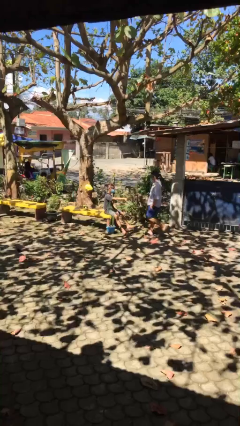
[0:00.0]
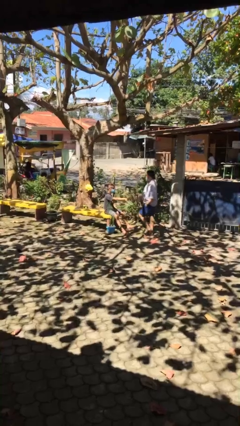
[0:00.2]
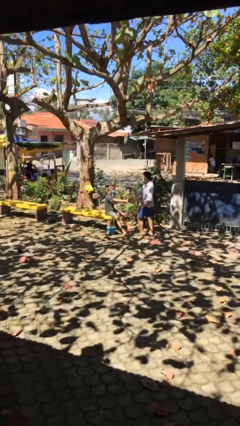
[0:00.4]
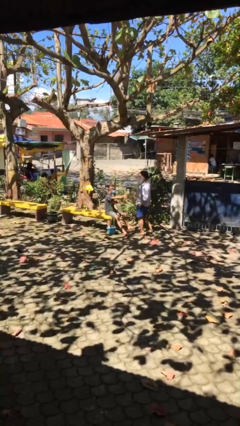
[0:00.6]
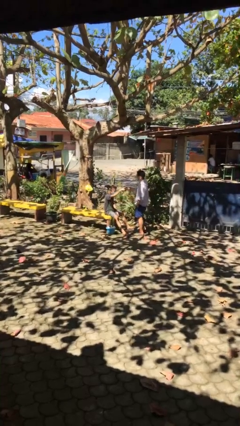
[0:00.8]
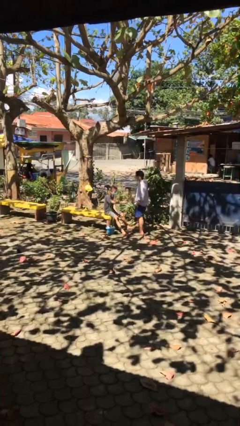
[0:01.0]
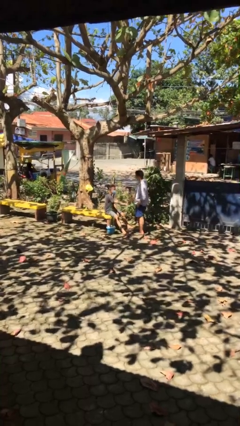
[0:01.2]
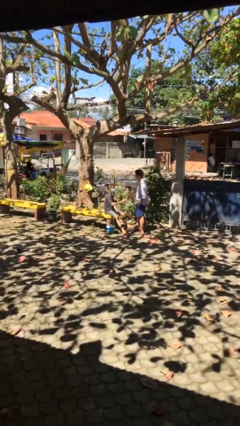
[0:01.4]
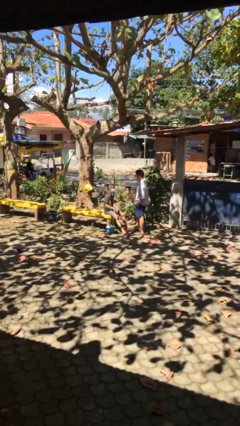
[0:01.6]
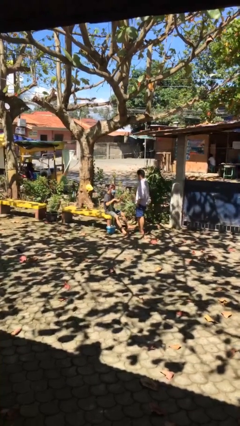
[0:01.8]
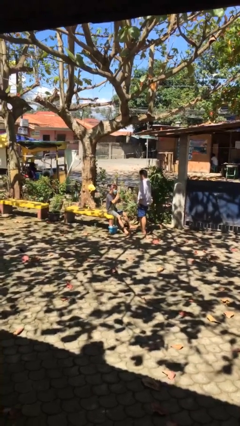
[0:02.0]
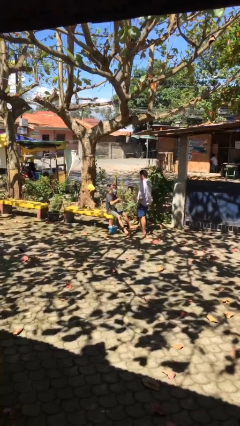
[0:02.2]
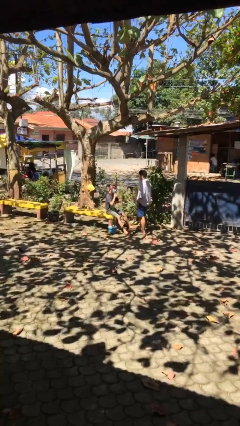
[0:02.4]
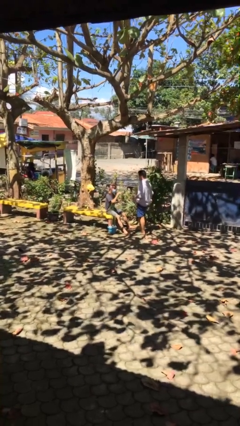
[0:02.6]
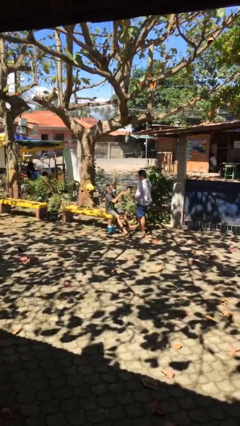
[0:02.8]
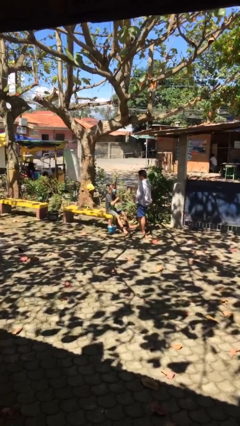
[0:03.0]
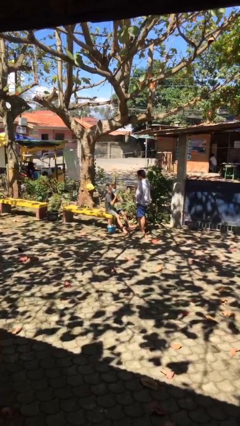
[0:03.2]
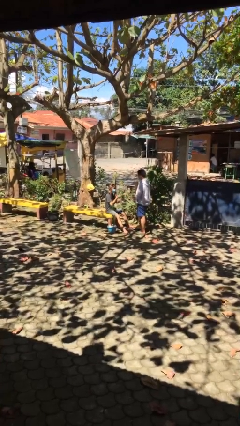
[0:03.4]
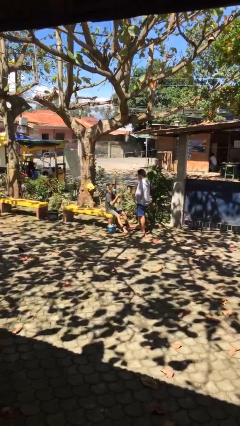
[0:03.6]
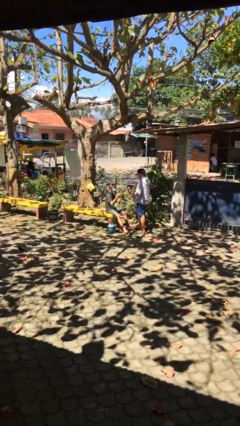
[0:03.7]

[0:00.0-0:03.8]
person shakes hand

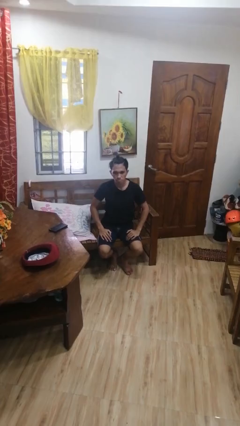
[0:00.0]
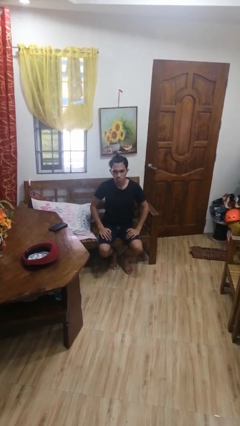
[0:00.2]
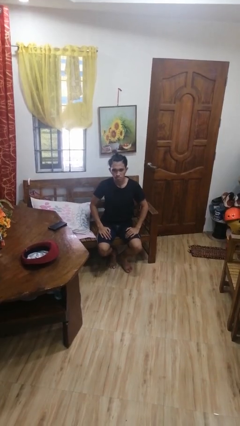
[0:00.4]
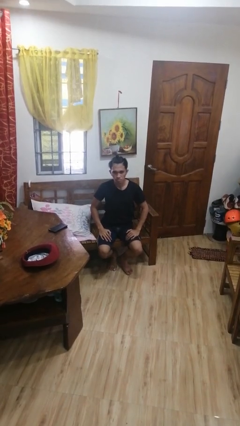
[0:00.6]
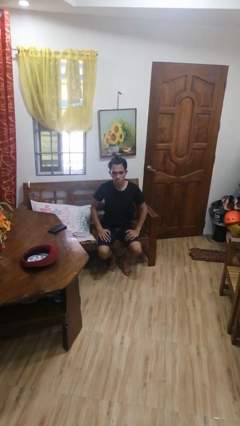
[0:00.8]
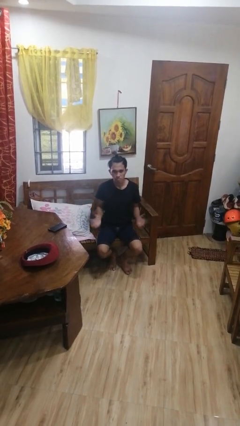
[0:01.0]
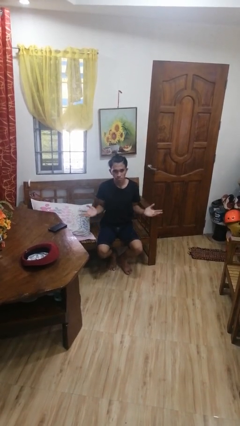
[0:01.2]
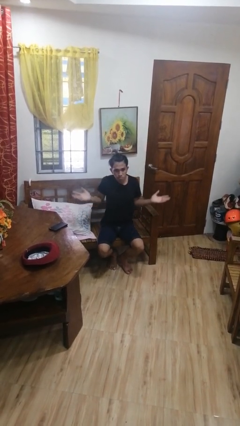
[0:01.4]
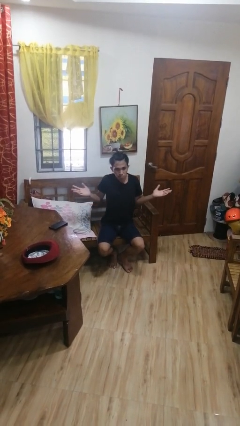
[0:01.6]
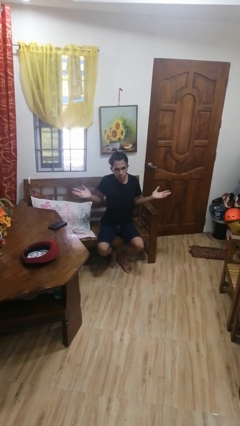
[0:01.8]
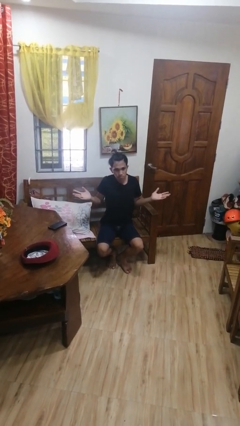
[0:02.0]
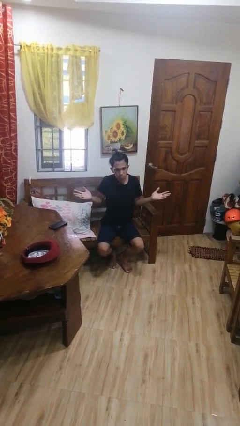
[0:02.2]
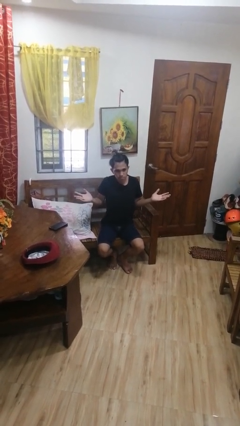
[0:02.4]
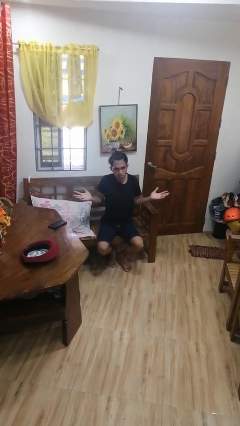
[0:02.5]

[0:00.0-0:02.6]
person shrugs

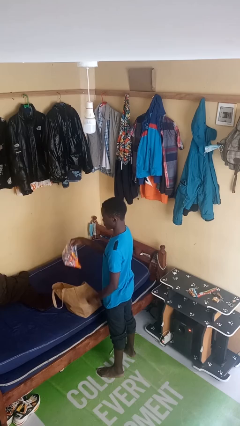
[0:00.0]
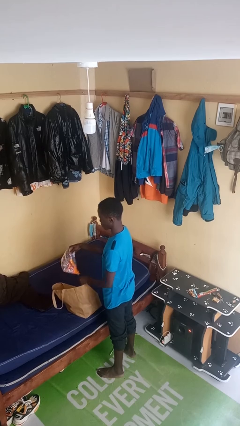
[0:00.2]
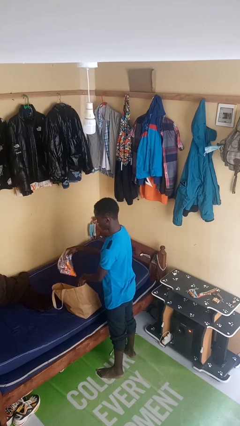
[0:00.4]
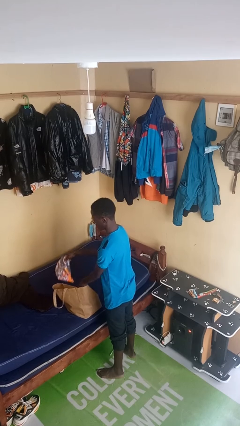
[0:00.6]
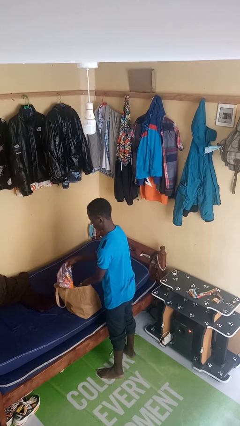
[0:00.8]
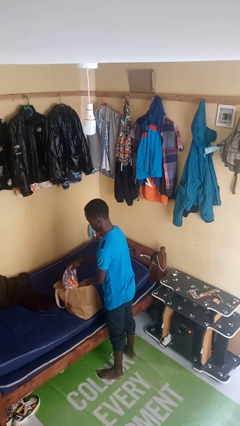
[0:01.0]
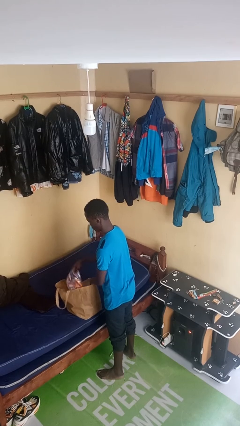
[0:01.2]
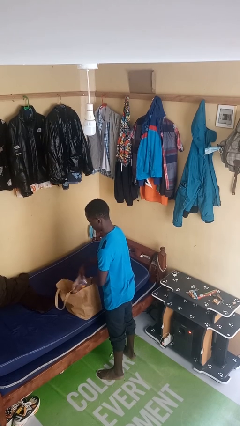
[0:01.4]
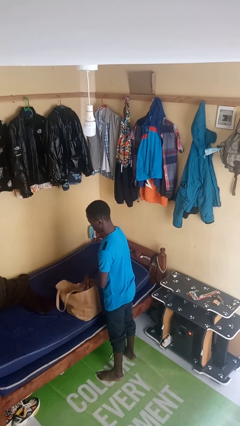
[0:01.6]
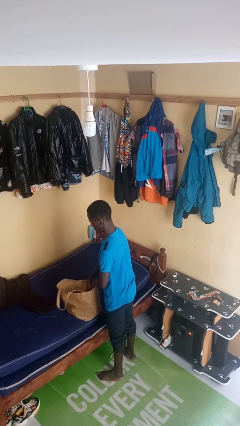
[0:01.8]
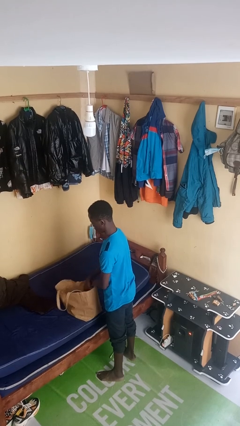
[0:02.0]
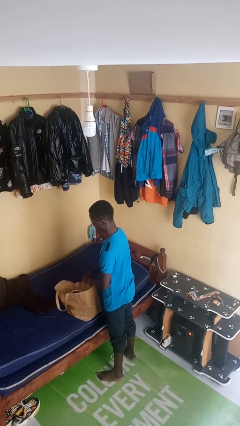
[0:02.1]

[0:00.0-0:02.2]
person puts object into bag

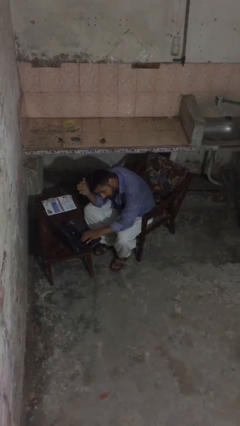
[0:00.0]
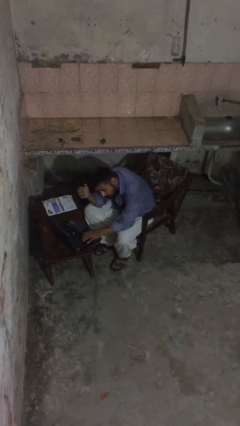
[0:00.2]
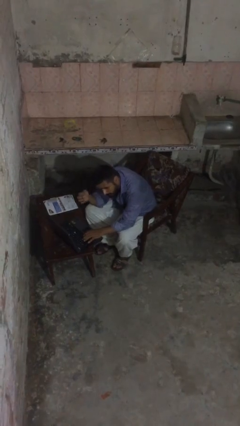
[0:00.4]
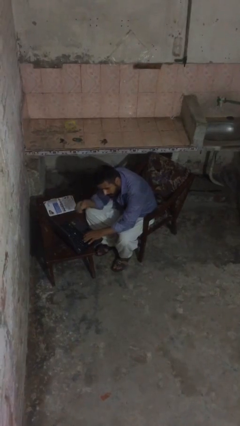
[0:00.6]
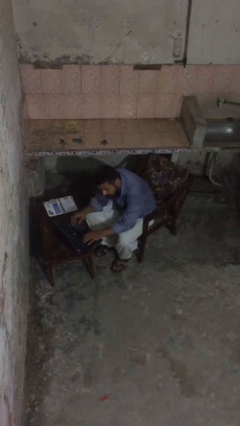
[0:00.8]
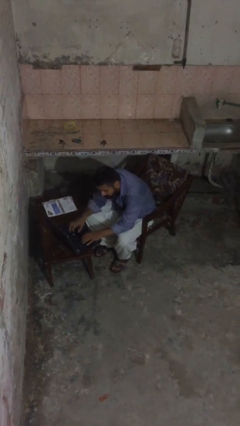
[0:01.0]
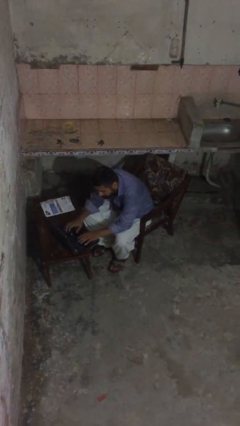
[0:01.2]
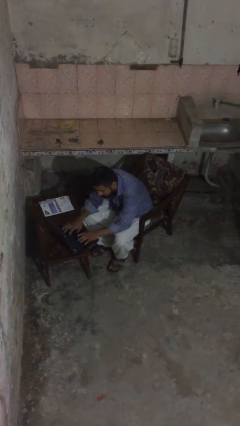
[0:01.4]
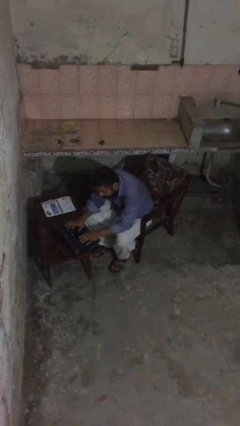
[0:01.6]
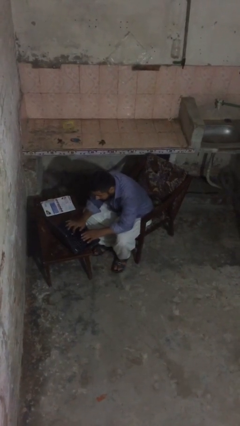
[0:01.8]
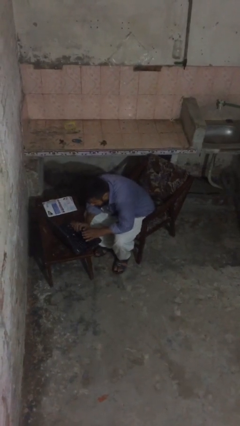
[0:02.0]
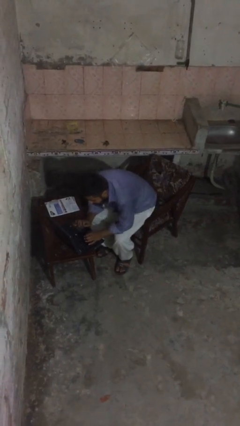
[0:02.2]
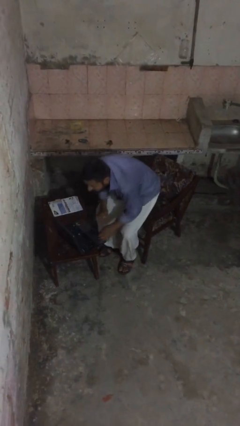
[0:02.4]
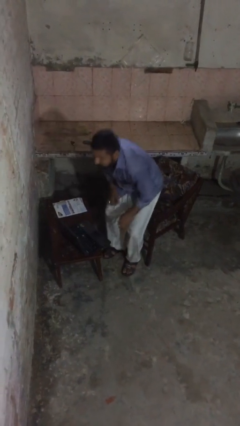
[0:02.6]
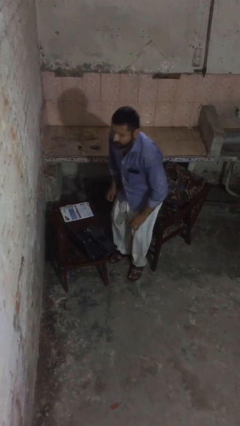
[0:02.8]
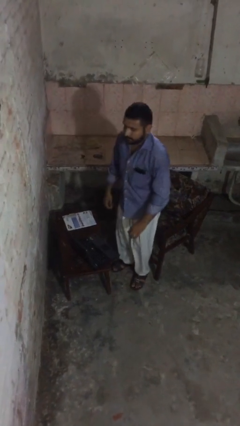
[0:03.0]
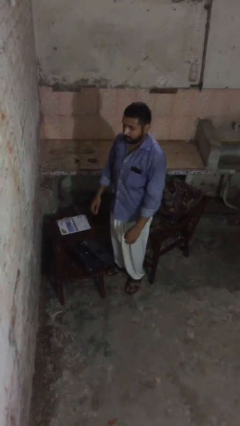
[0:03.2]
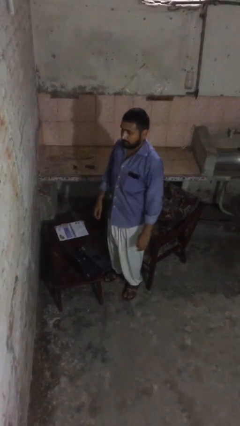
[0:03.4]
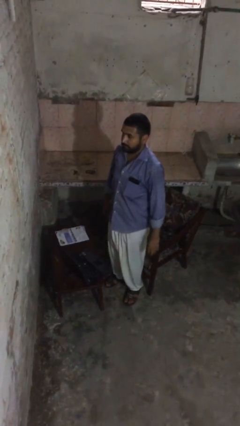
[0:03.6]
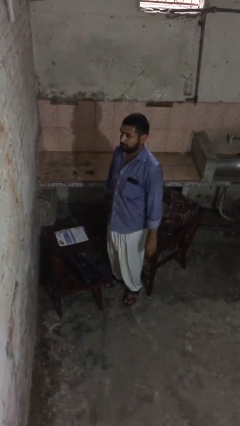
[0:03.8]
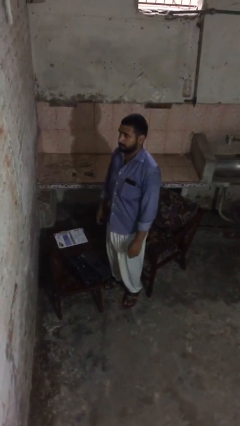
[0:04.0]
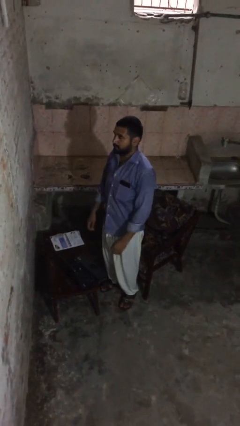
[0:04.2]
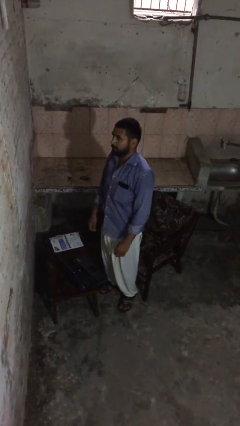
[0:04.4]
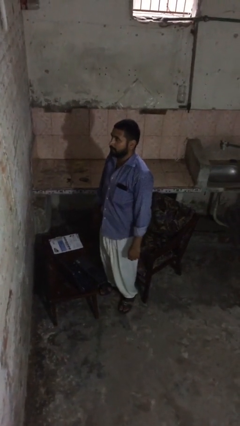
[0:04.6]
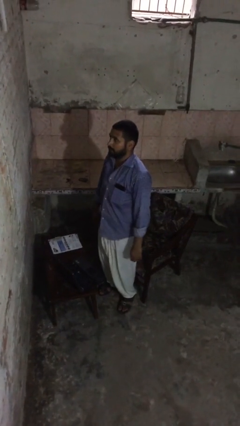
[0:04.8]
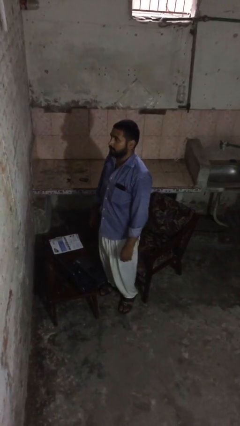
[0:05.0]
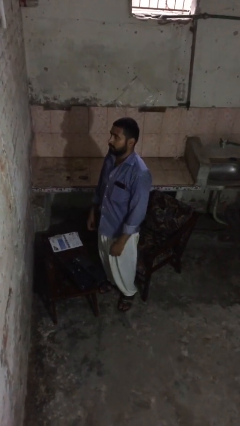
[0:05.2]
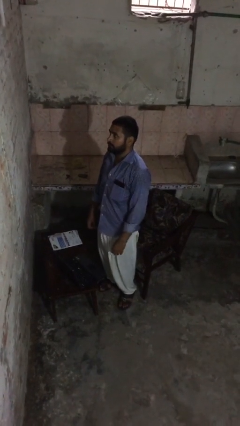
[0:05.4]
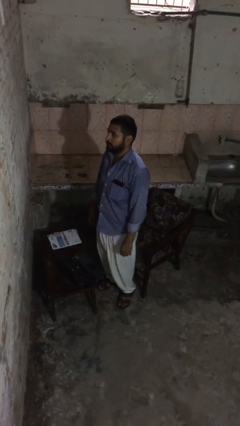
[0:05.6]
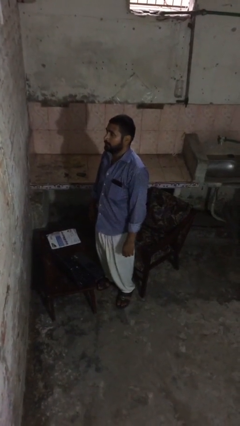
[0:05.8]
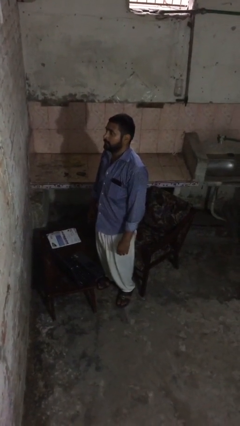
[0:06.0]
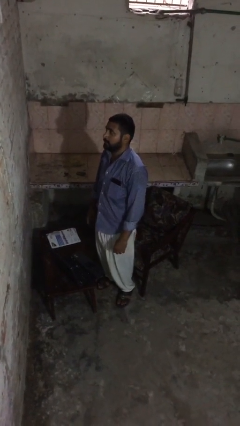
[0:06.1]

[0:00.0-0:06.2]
person stands up

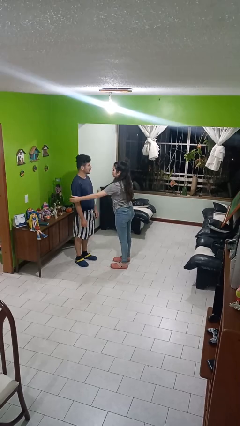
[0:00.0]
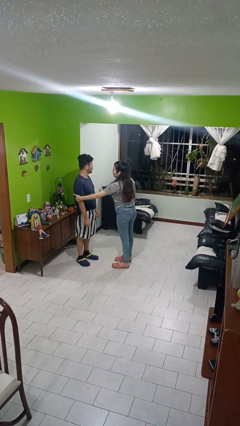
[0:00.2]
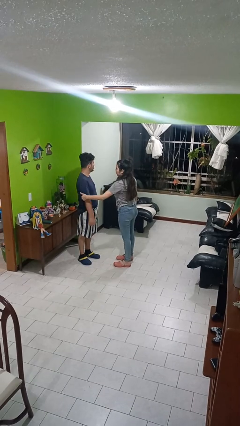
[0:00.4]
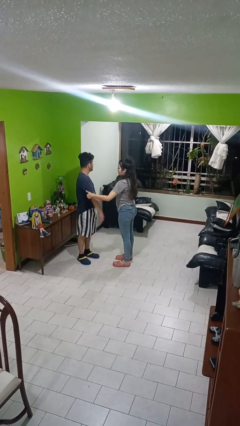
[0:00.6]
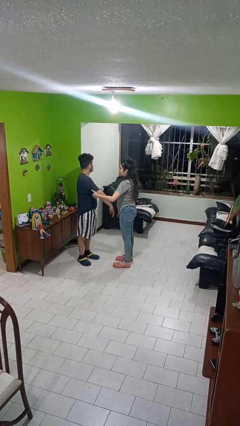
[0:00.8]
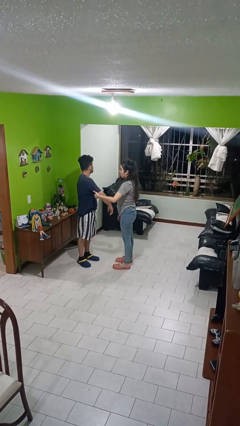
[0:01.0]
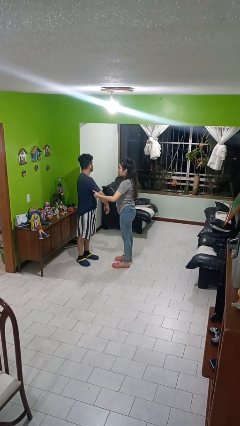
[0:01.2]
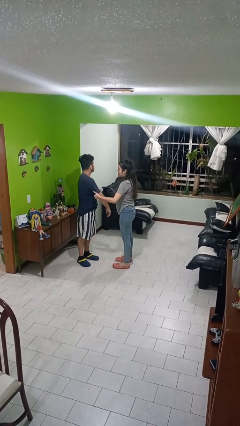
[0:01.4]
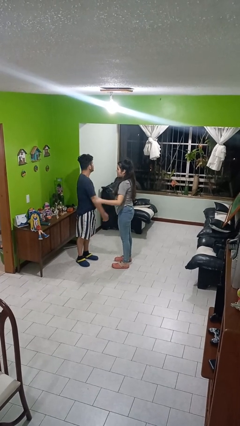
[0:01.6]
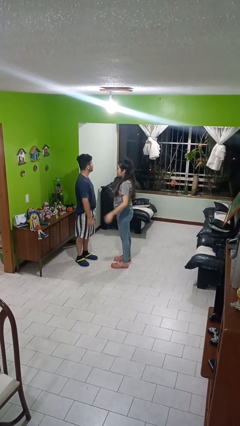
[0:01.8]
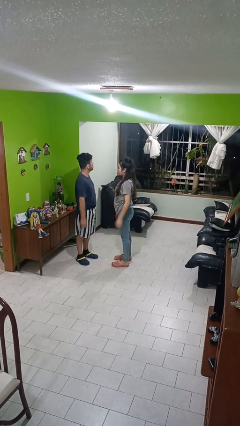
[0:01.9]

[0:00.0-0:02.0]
person grabs person by bicep

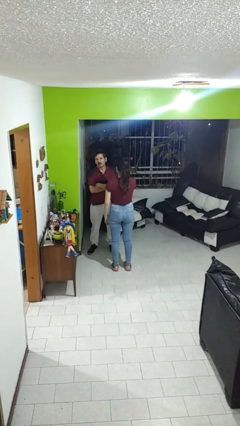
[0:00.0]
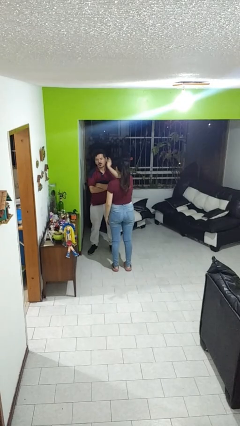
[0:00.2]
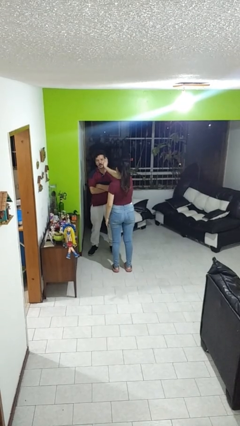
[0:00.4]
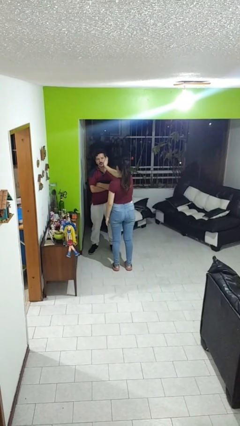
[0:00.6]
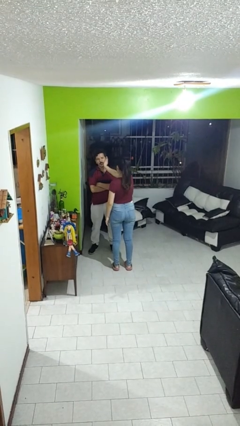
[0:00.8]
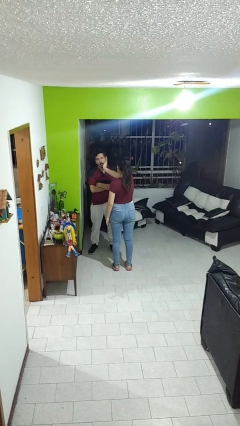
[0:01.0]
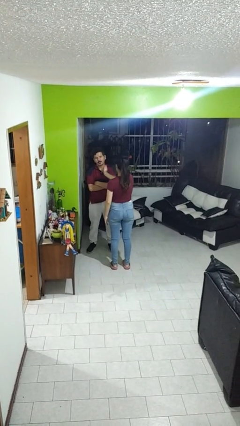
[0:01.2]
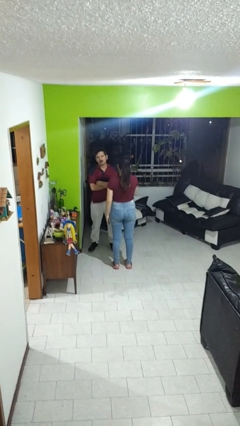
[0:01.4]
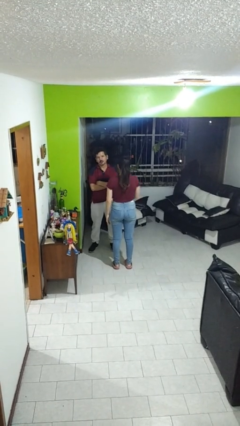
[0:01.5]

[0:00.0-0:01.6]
person touches face of person
